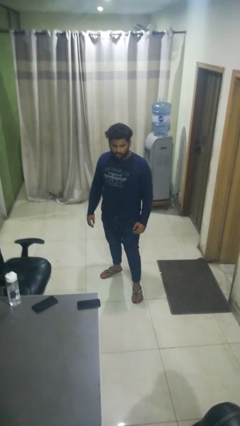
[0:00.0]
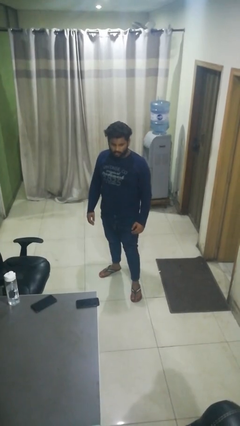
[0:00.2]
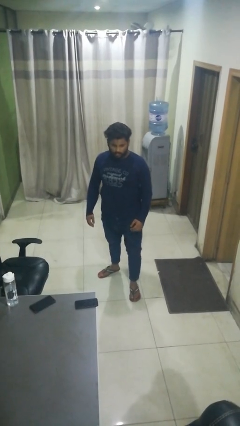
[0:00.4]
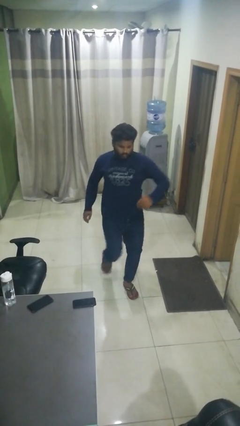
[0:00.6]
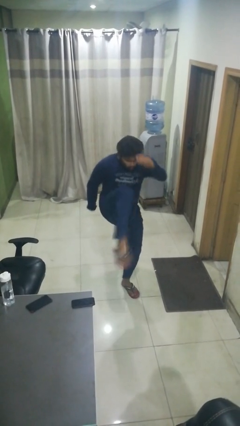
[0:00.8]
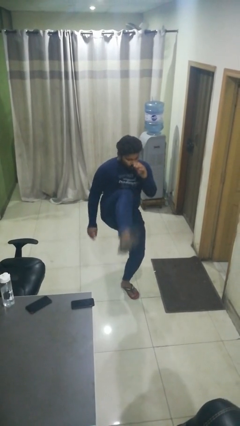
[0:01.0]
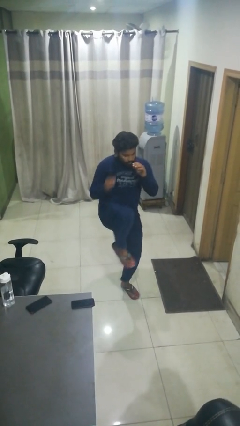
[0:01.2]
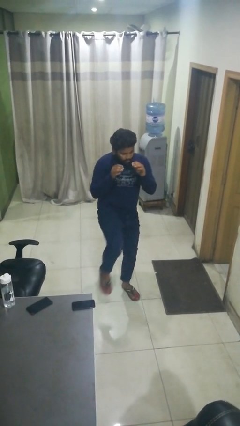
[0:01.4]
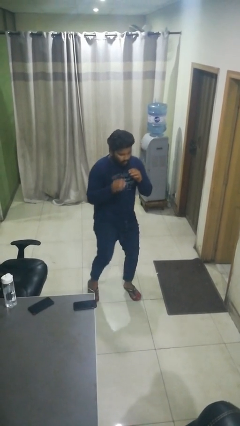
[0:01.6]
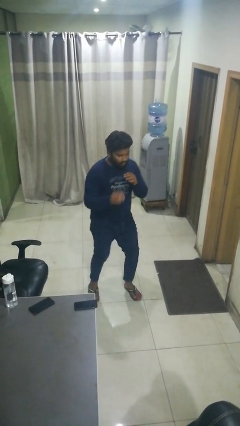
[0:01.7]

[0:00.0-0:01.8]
person karate kicks

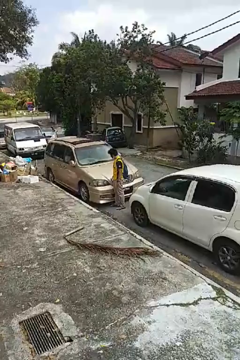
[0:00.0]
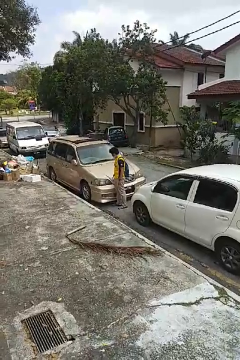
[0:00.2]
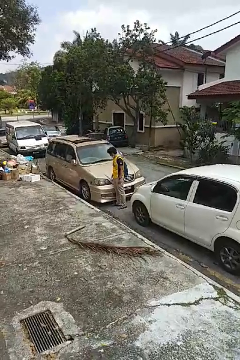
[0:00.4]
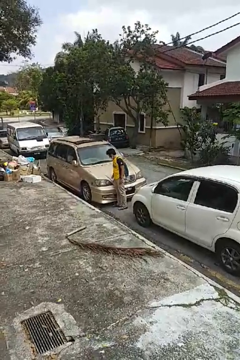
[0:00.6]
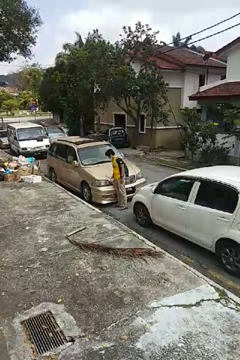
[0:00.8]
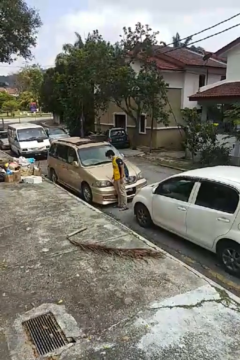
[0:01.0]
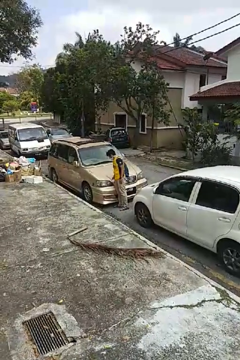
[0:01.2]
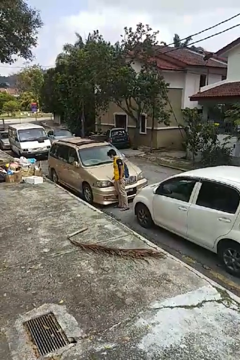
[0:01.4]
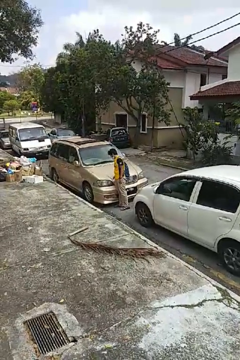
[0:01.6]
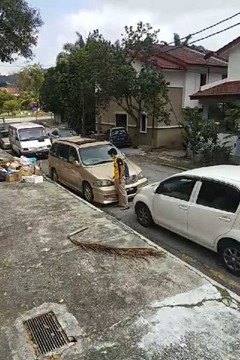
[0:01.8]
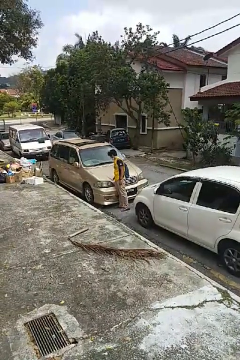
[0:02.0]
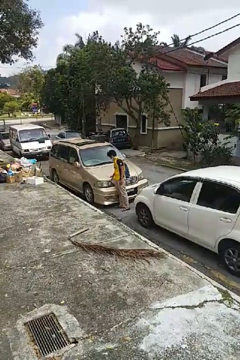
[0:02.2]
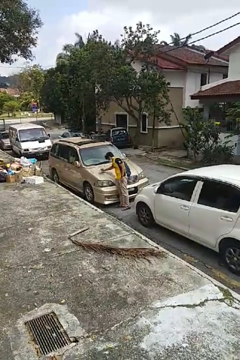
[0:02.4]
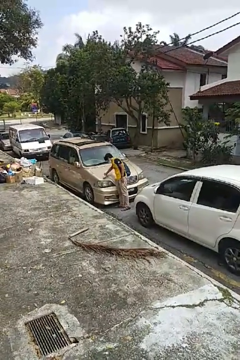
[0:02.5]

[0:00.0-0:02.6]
person polishes car with rag

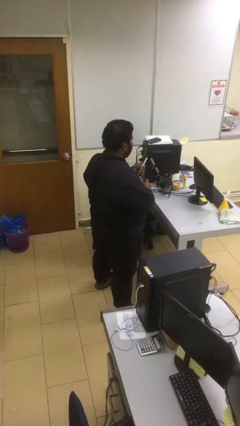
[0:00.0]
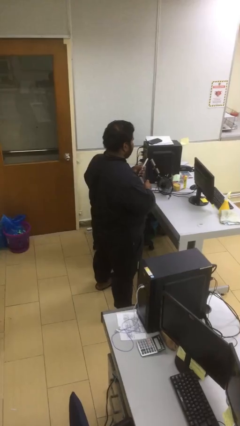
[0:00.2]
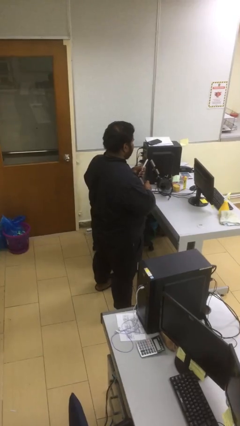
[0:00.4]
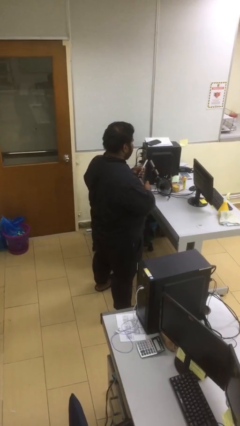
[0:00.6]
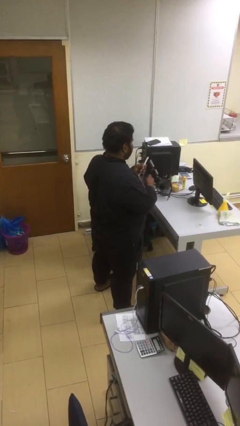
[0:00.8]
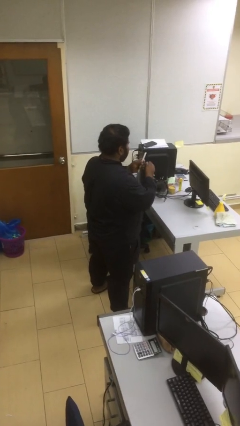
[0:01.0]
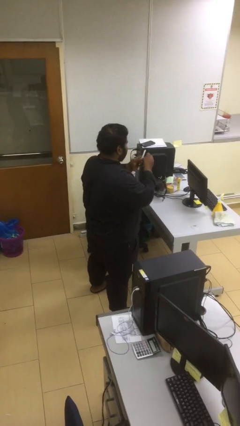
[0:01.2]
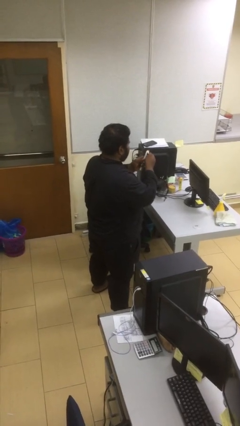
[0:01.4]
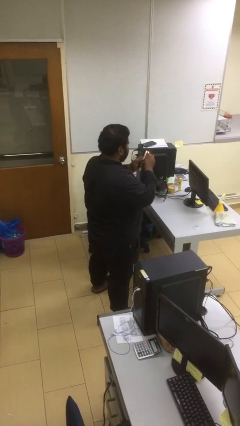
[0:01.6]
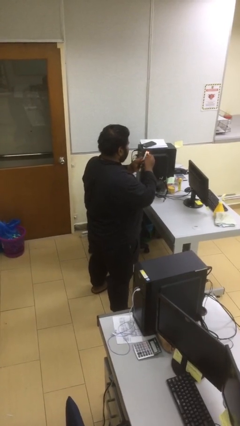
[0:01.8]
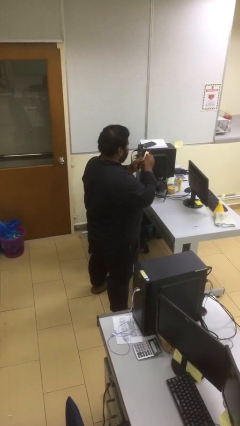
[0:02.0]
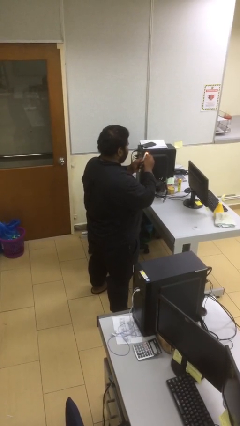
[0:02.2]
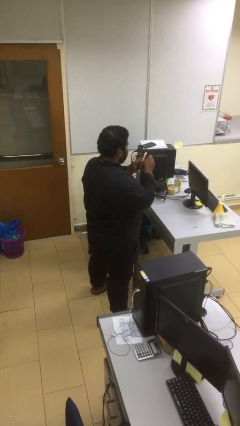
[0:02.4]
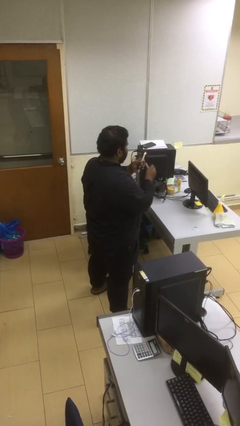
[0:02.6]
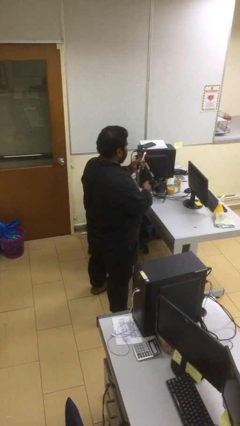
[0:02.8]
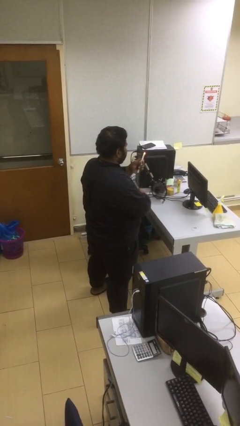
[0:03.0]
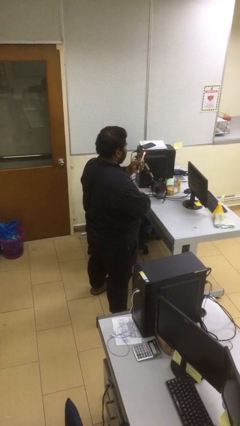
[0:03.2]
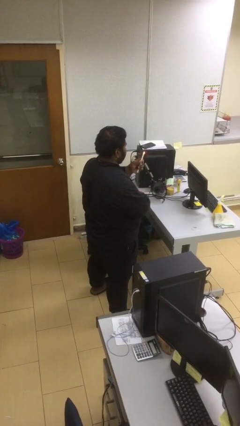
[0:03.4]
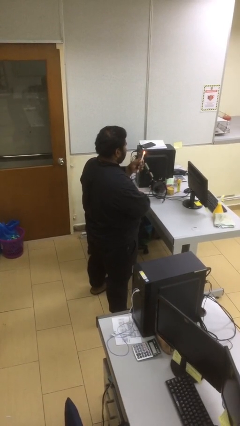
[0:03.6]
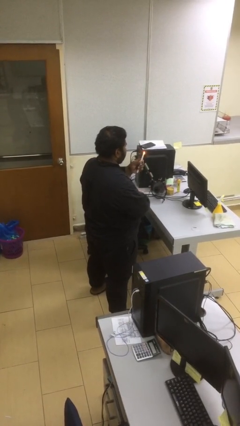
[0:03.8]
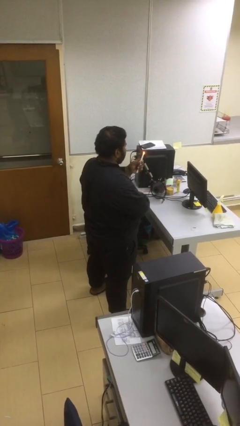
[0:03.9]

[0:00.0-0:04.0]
person lights candle

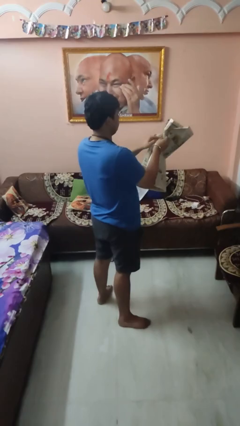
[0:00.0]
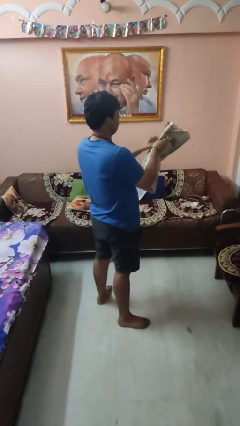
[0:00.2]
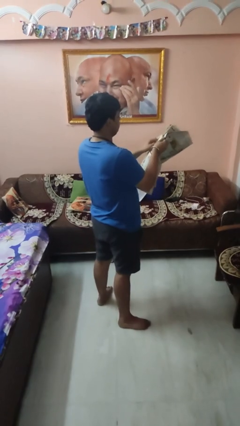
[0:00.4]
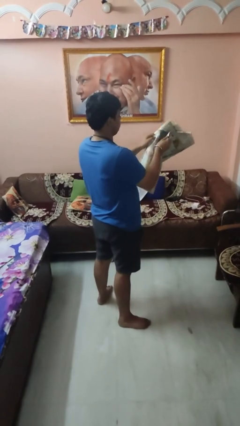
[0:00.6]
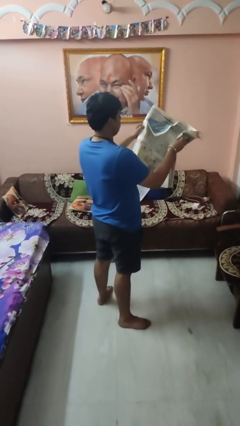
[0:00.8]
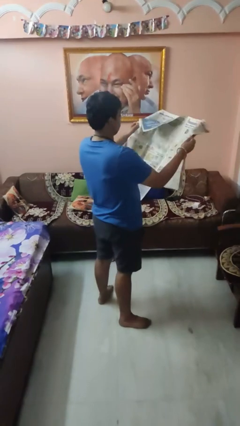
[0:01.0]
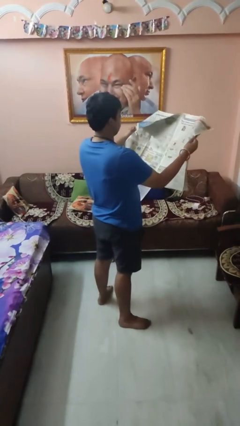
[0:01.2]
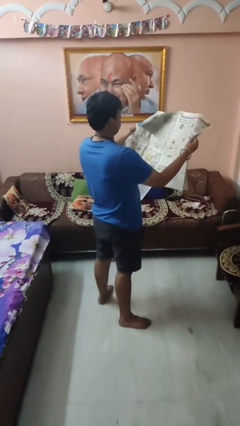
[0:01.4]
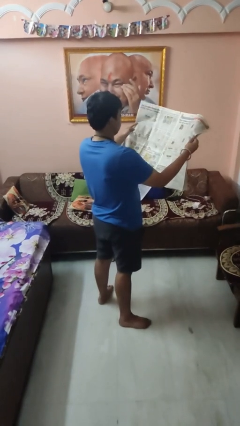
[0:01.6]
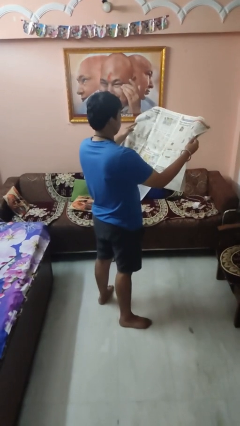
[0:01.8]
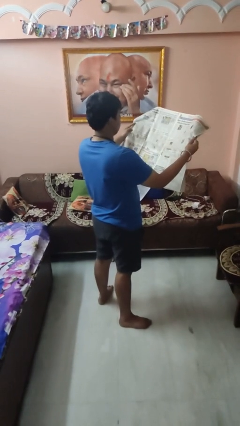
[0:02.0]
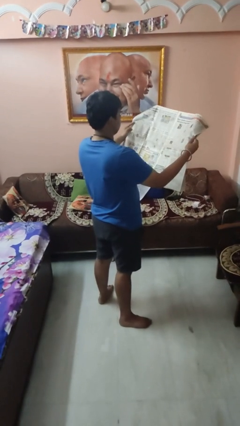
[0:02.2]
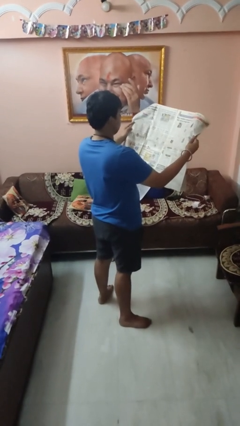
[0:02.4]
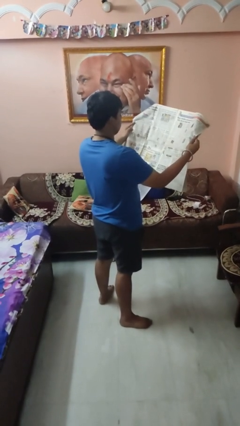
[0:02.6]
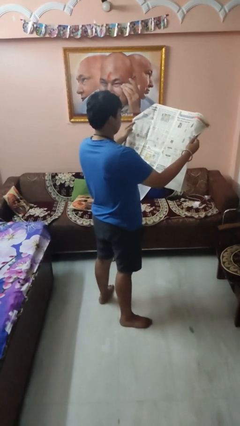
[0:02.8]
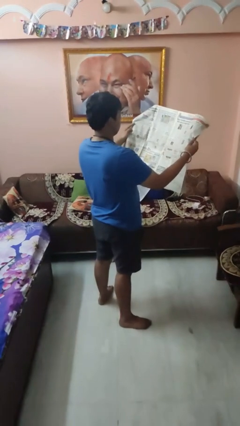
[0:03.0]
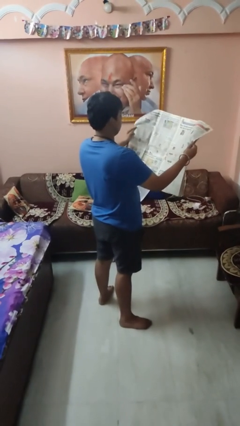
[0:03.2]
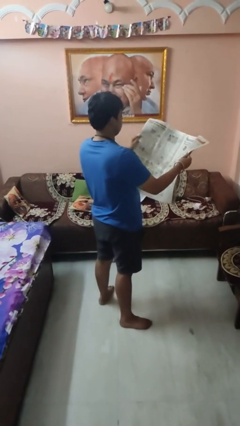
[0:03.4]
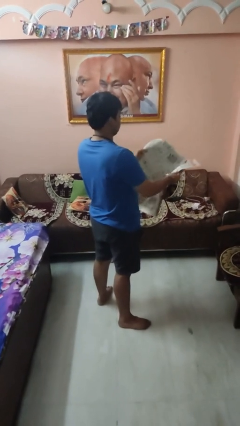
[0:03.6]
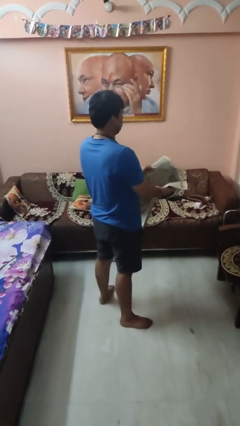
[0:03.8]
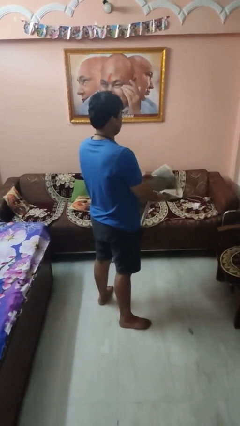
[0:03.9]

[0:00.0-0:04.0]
person reads newspaper

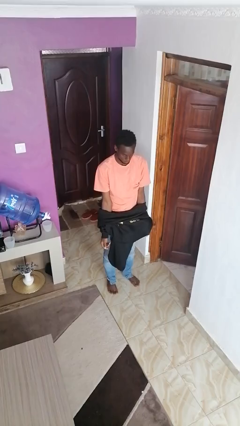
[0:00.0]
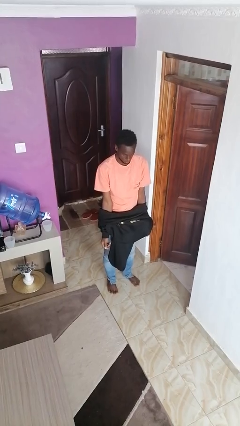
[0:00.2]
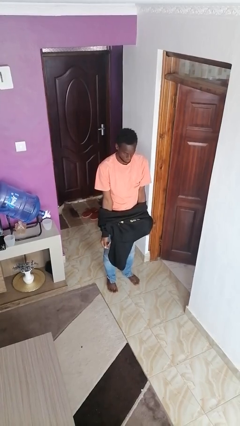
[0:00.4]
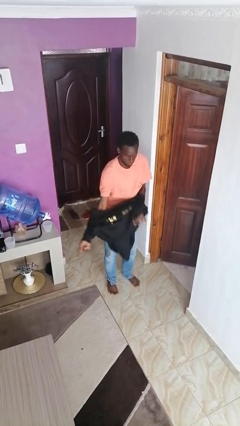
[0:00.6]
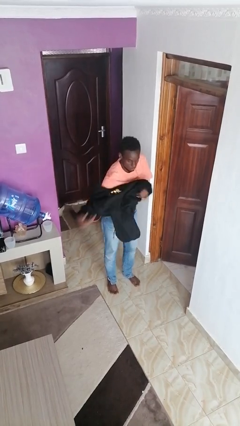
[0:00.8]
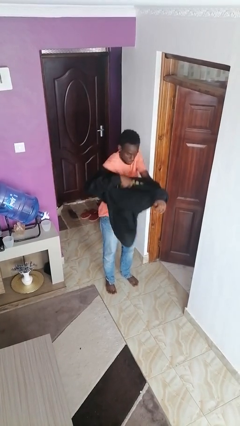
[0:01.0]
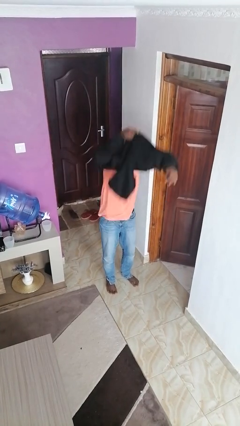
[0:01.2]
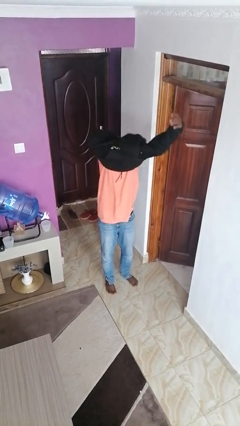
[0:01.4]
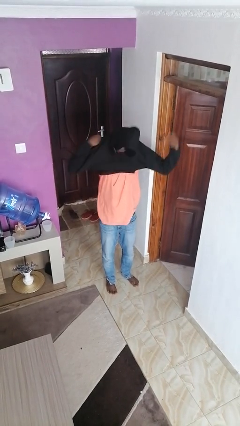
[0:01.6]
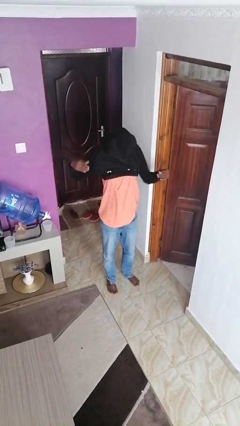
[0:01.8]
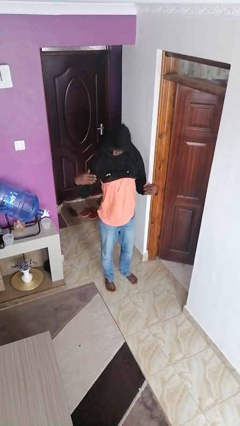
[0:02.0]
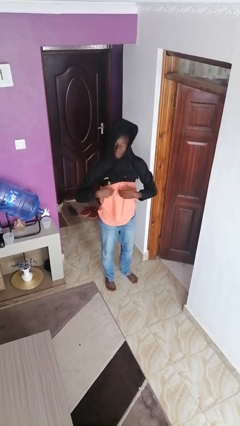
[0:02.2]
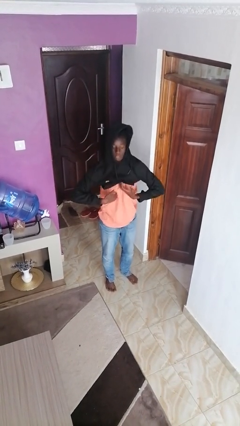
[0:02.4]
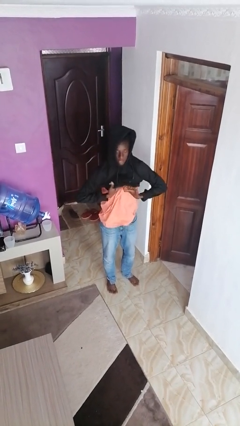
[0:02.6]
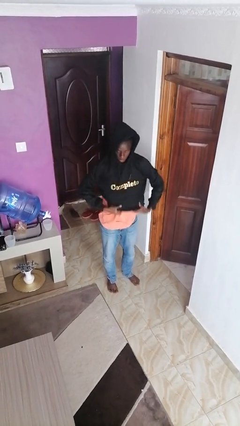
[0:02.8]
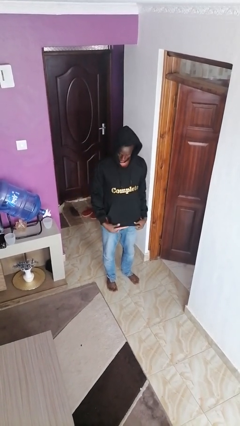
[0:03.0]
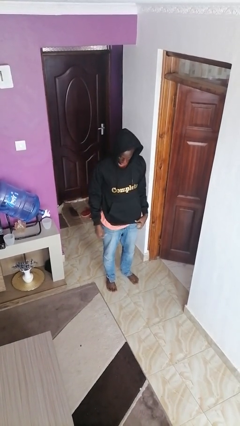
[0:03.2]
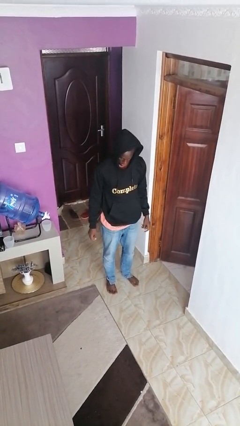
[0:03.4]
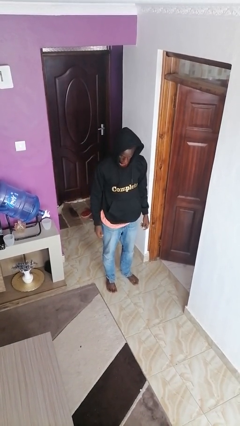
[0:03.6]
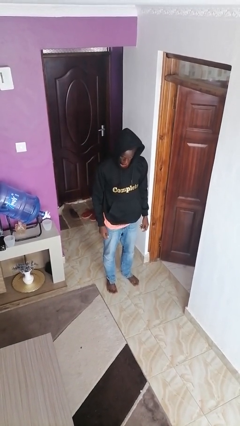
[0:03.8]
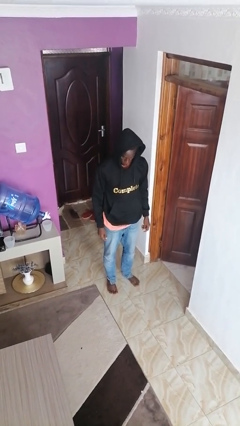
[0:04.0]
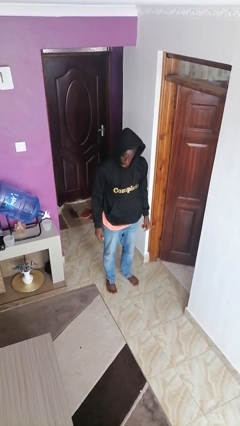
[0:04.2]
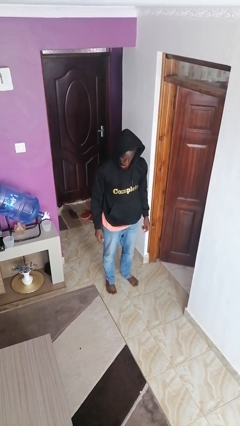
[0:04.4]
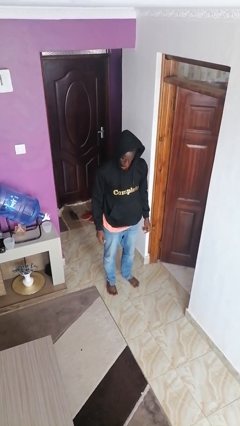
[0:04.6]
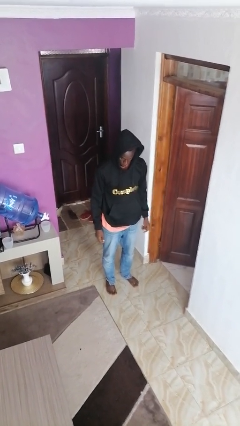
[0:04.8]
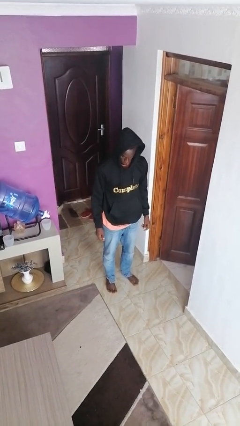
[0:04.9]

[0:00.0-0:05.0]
person puts on hoodie

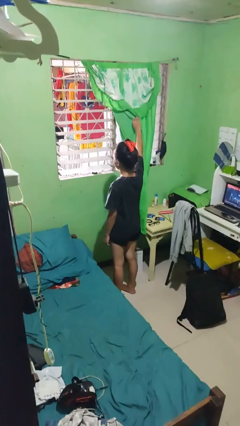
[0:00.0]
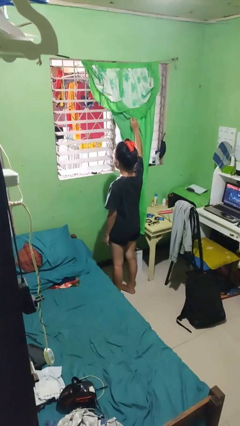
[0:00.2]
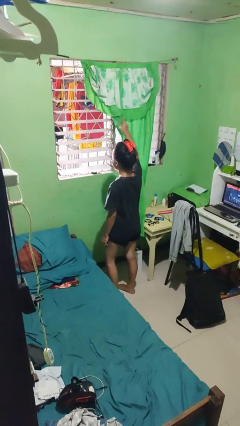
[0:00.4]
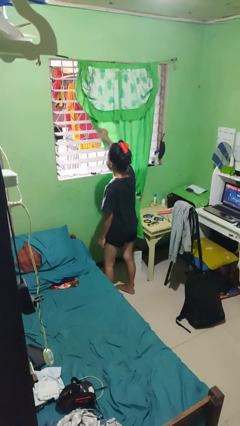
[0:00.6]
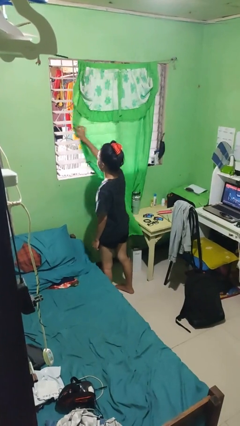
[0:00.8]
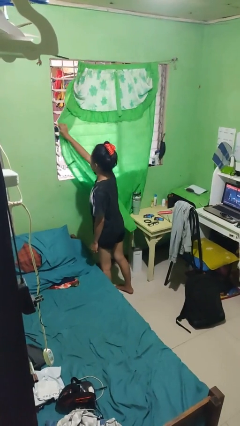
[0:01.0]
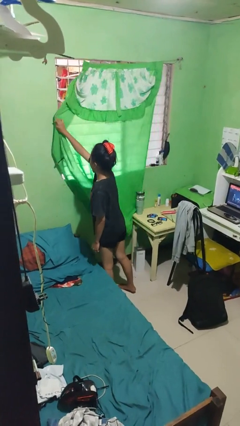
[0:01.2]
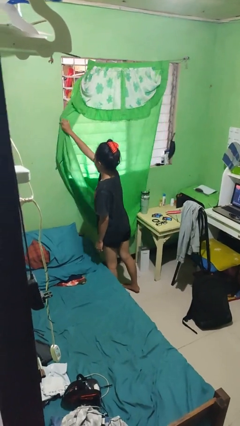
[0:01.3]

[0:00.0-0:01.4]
person closes curtains
